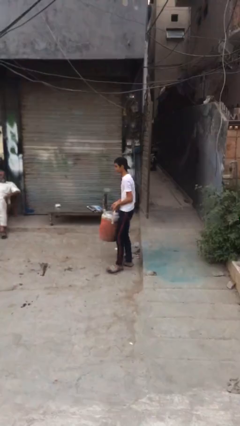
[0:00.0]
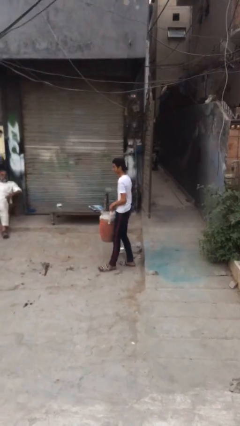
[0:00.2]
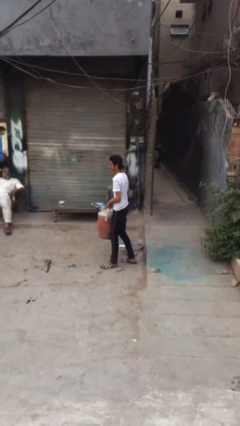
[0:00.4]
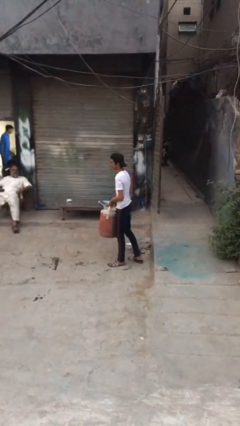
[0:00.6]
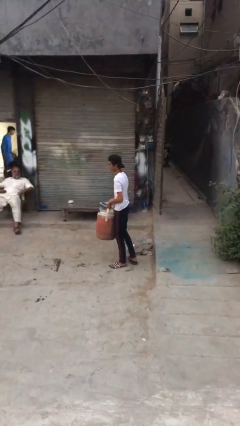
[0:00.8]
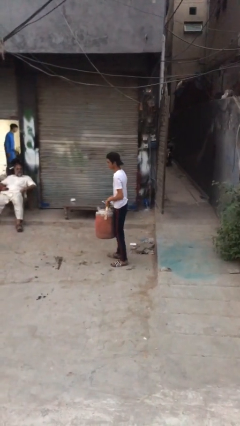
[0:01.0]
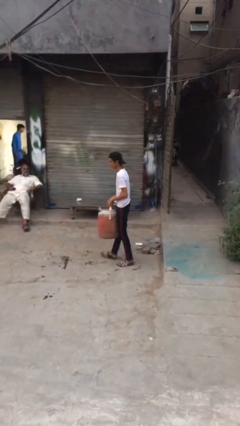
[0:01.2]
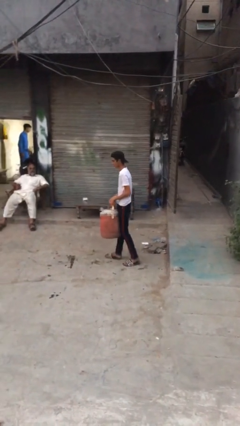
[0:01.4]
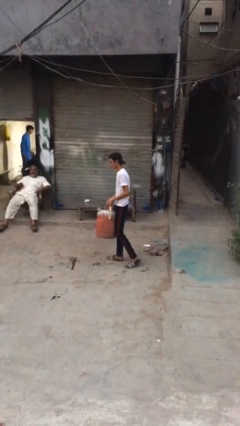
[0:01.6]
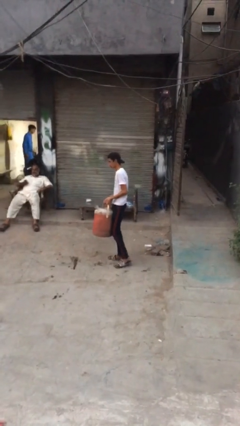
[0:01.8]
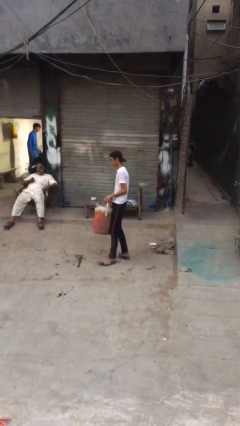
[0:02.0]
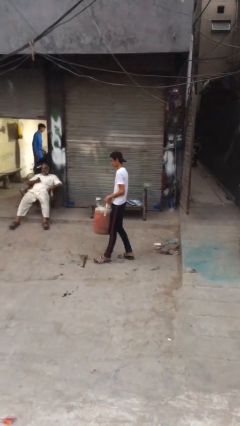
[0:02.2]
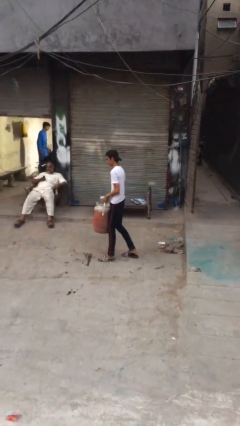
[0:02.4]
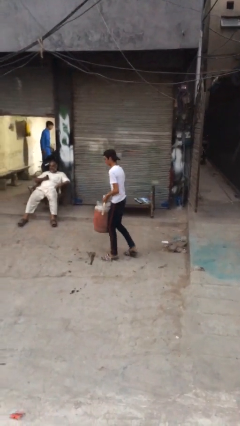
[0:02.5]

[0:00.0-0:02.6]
person carries heavy object

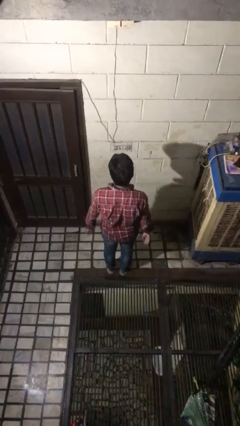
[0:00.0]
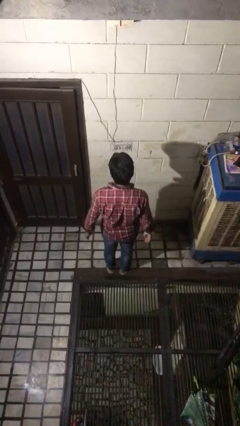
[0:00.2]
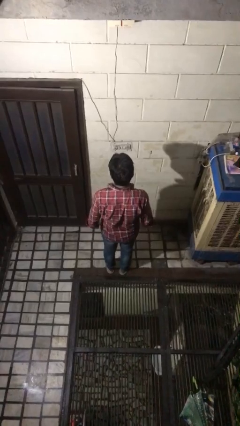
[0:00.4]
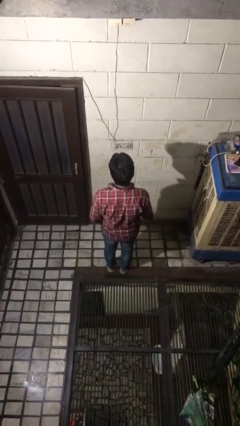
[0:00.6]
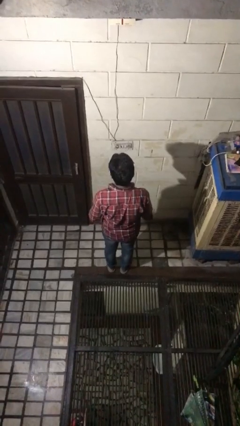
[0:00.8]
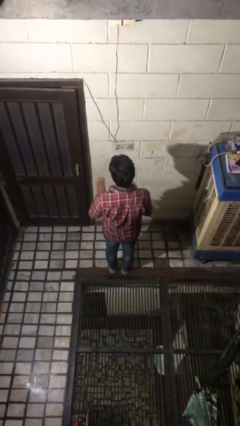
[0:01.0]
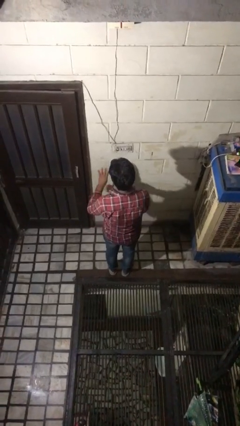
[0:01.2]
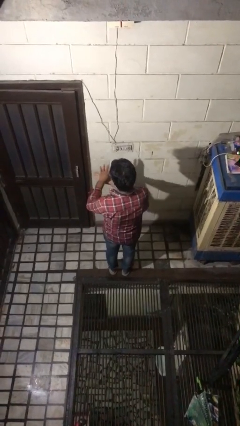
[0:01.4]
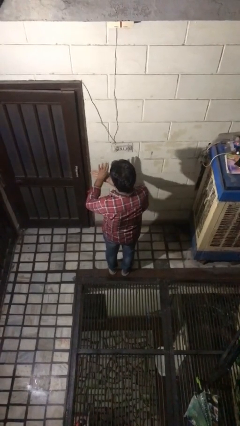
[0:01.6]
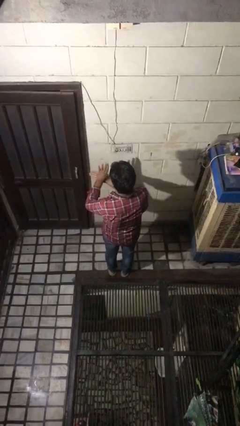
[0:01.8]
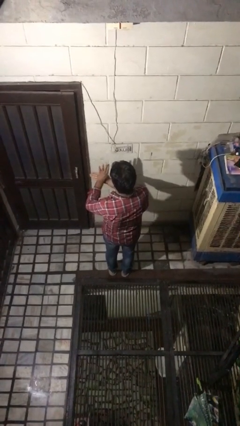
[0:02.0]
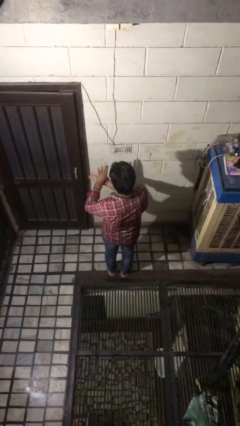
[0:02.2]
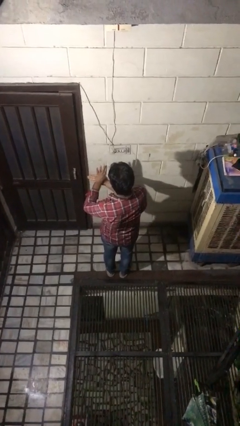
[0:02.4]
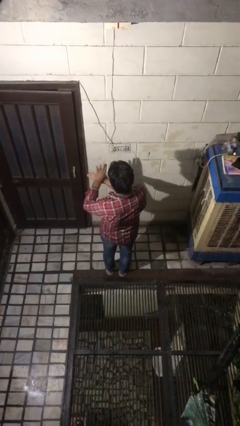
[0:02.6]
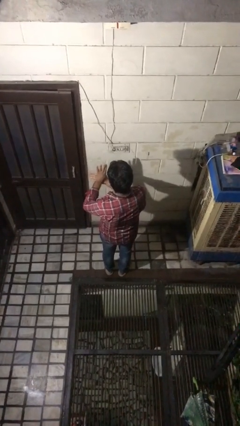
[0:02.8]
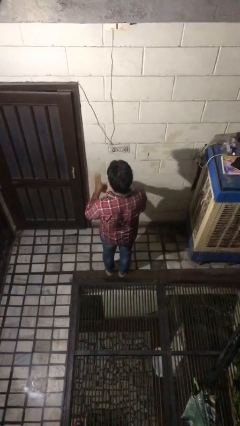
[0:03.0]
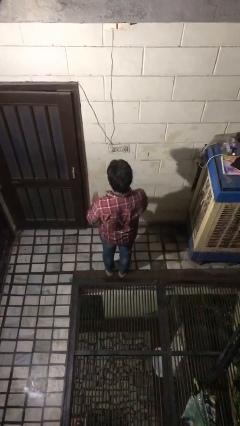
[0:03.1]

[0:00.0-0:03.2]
person gestures number four

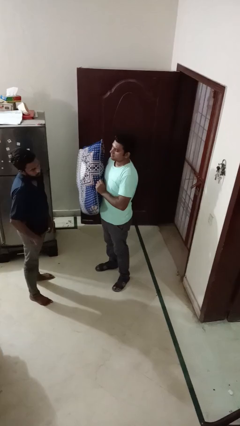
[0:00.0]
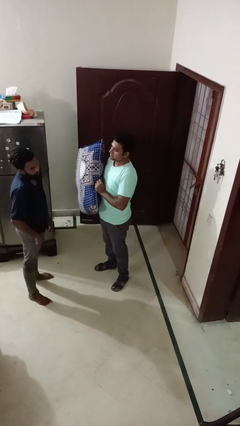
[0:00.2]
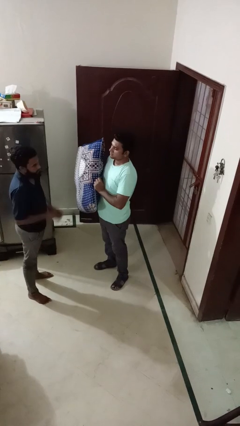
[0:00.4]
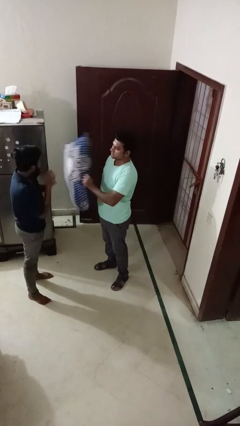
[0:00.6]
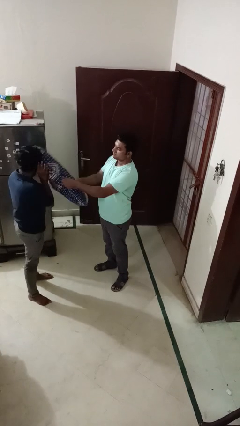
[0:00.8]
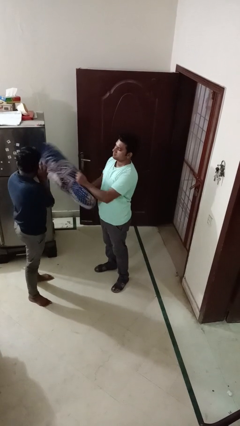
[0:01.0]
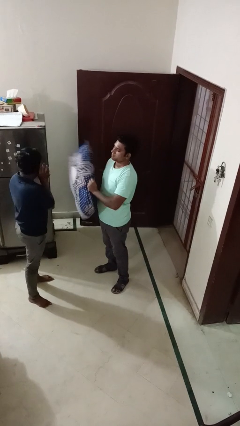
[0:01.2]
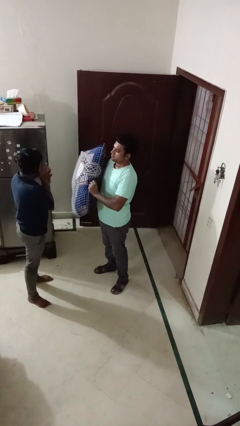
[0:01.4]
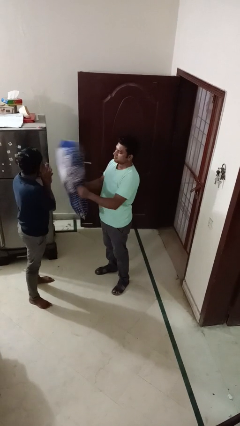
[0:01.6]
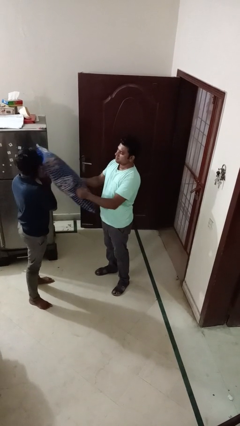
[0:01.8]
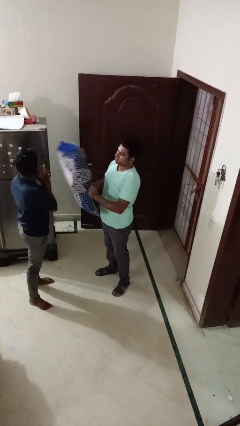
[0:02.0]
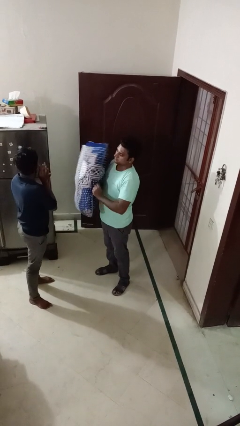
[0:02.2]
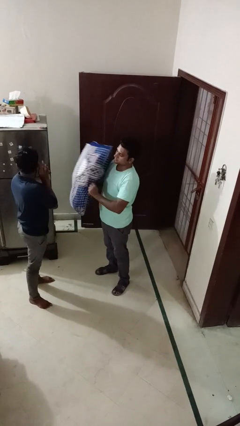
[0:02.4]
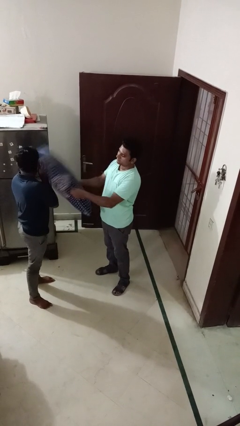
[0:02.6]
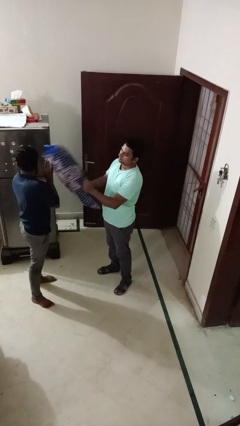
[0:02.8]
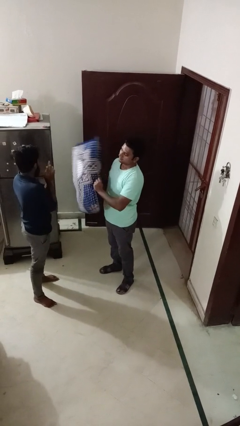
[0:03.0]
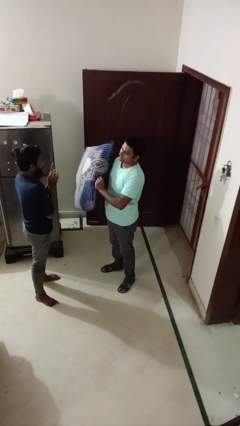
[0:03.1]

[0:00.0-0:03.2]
person hits person with pillow

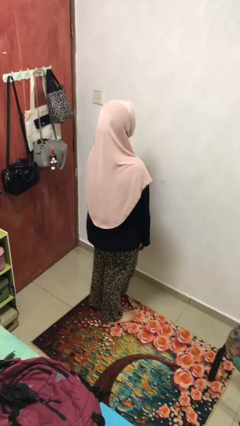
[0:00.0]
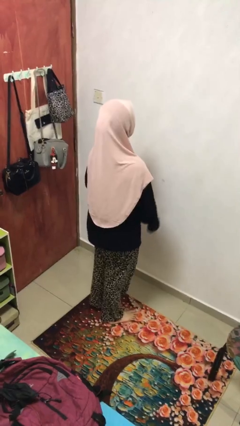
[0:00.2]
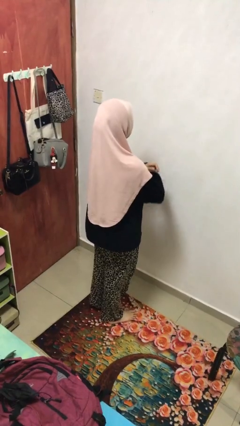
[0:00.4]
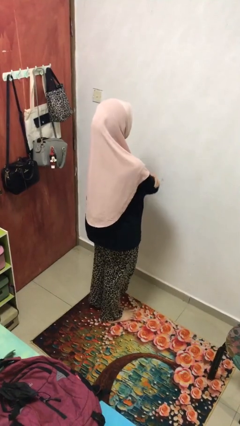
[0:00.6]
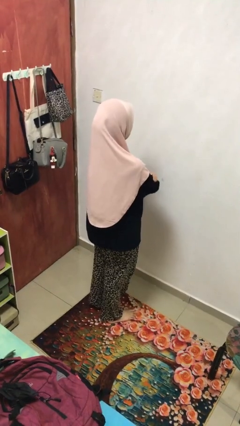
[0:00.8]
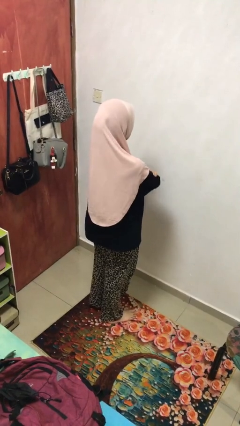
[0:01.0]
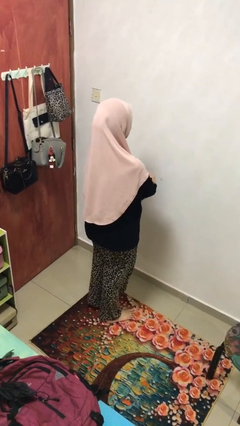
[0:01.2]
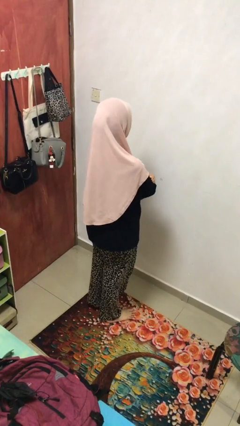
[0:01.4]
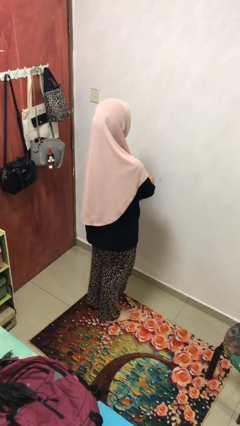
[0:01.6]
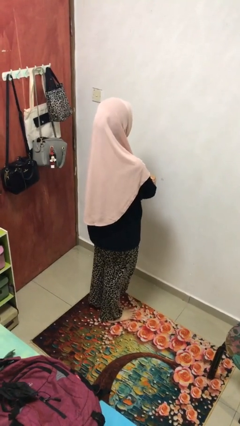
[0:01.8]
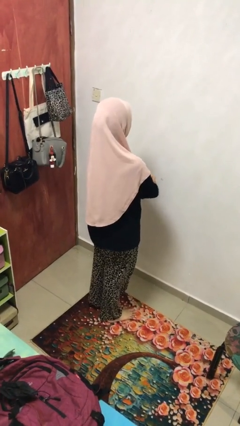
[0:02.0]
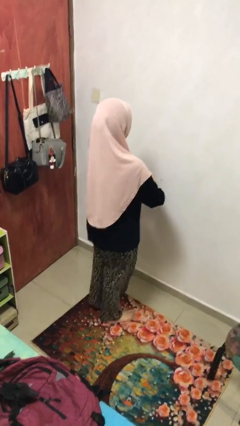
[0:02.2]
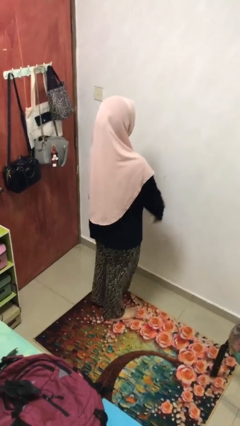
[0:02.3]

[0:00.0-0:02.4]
person crosses arms

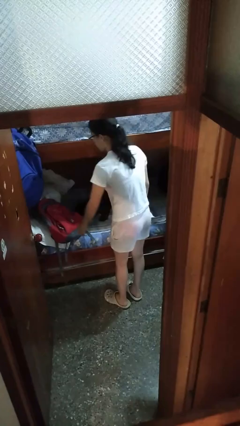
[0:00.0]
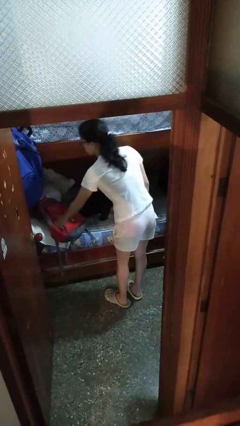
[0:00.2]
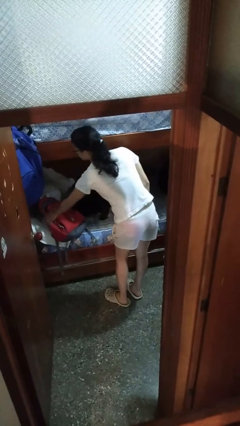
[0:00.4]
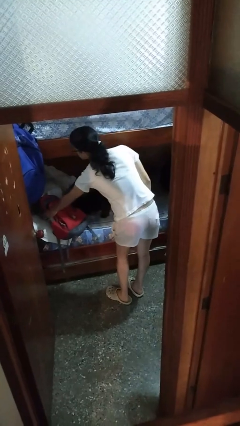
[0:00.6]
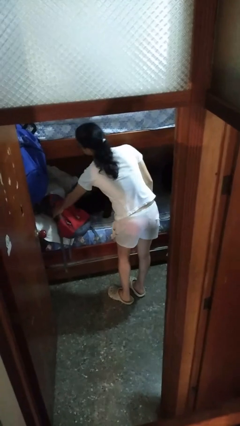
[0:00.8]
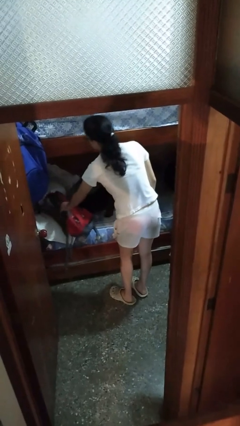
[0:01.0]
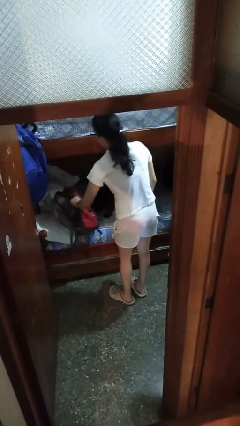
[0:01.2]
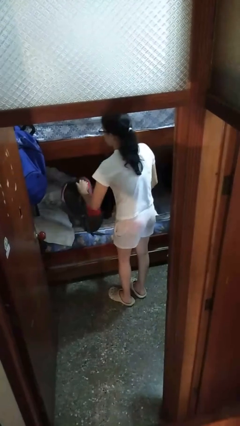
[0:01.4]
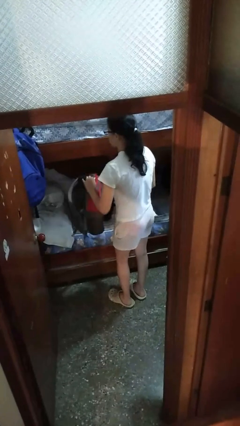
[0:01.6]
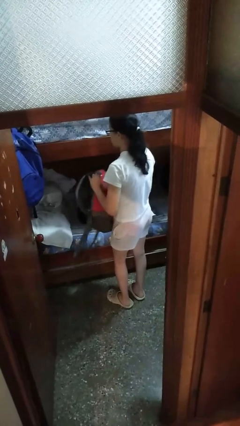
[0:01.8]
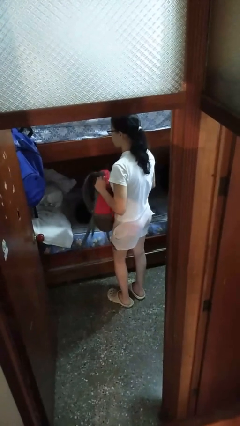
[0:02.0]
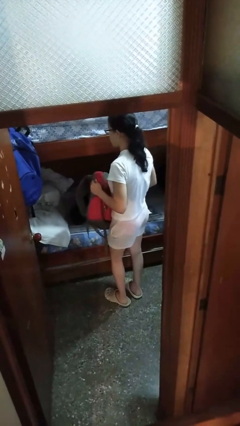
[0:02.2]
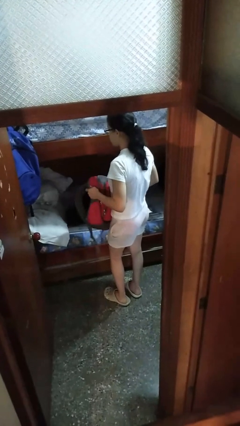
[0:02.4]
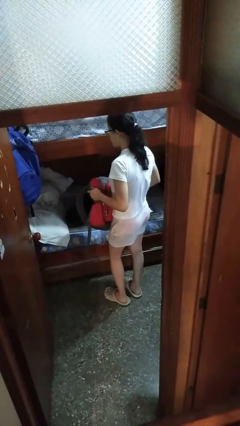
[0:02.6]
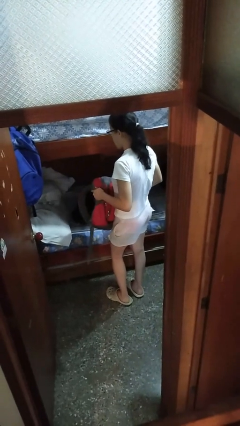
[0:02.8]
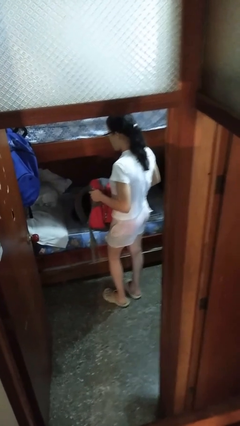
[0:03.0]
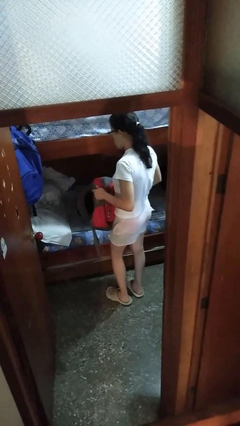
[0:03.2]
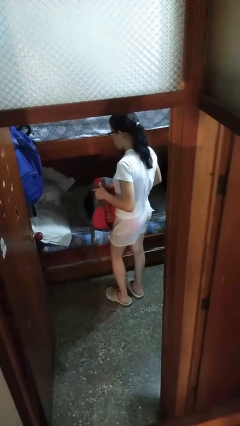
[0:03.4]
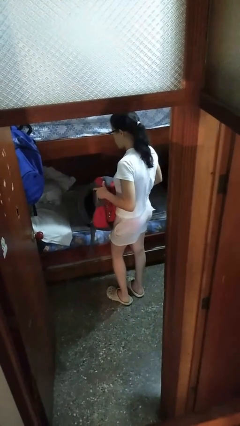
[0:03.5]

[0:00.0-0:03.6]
person picks up object from bed

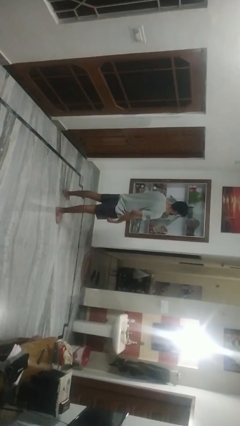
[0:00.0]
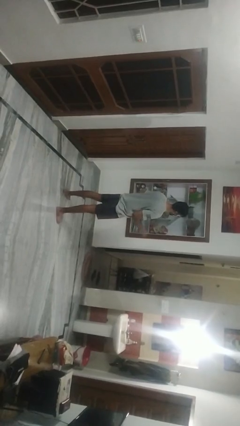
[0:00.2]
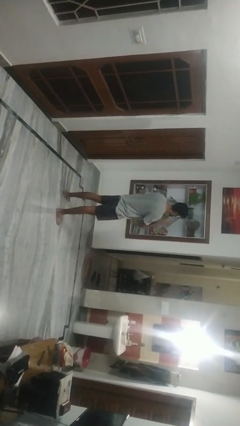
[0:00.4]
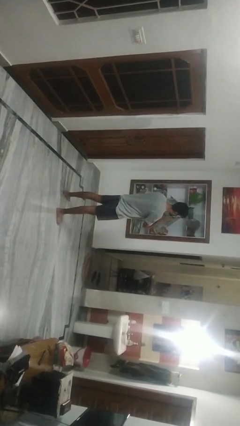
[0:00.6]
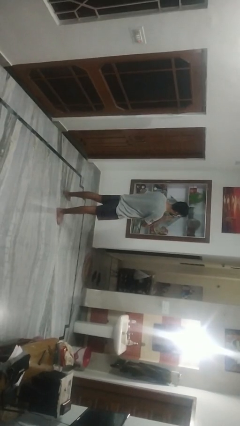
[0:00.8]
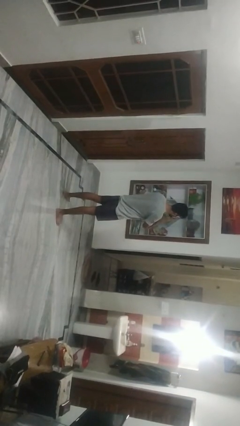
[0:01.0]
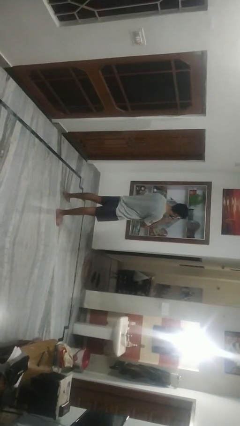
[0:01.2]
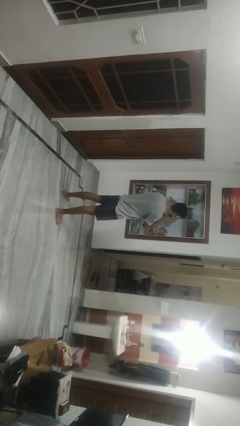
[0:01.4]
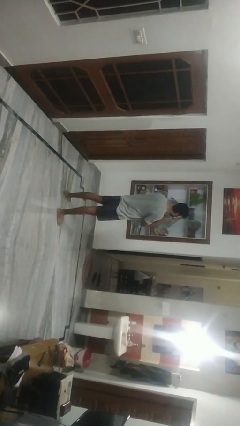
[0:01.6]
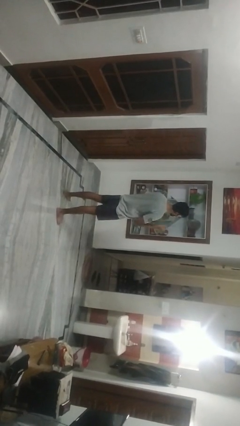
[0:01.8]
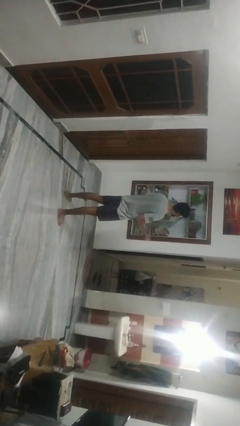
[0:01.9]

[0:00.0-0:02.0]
person scratches face

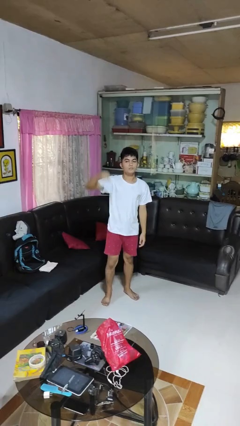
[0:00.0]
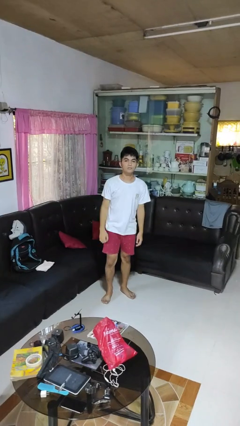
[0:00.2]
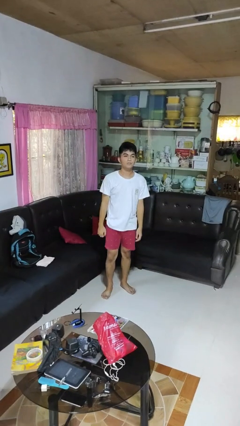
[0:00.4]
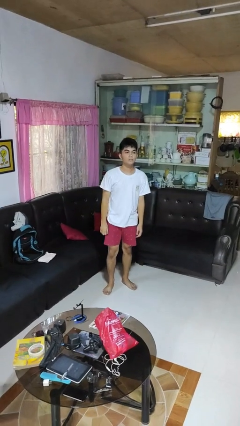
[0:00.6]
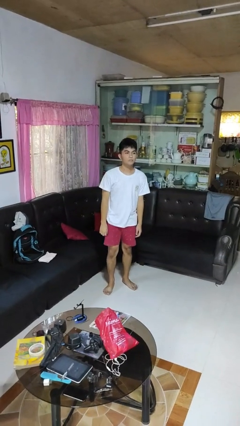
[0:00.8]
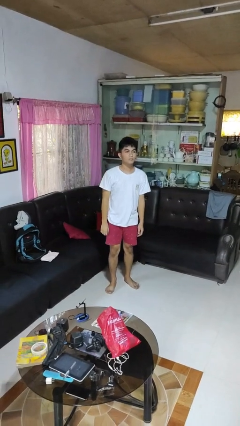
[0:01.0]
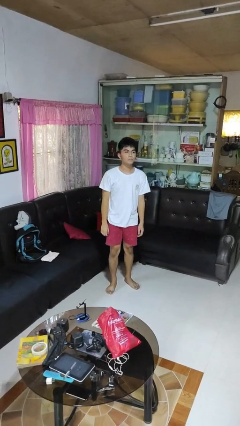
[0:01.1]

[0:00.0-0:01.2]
person gestures lower hand
